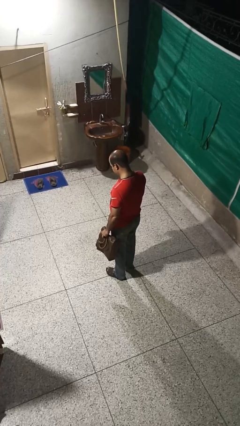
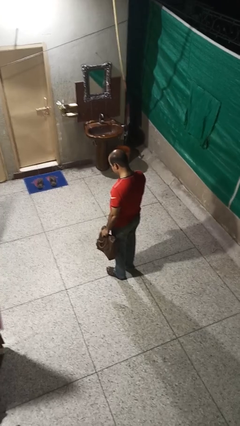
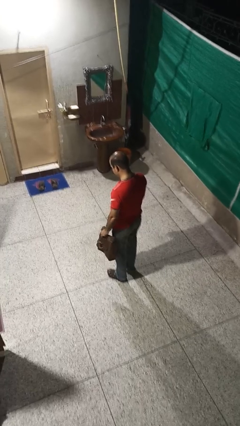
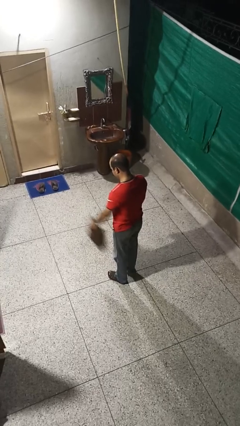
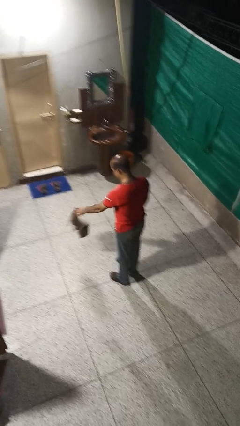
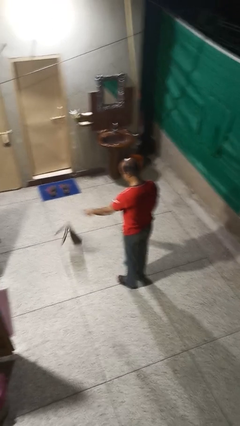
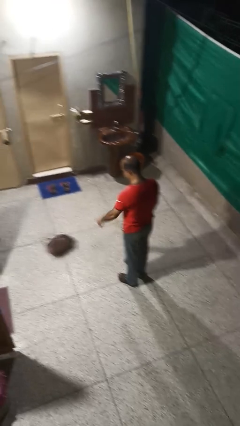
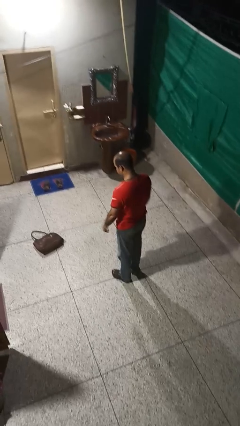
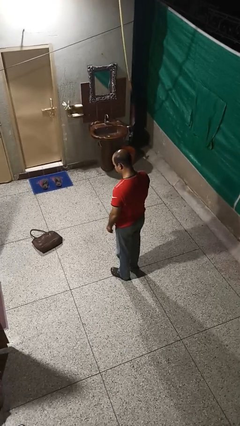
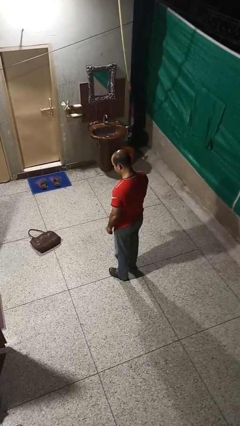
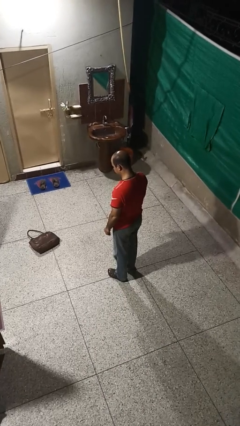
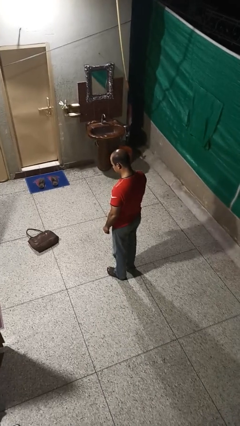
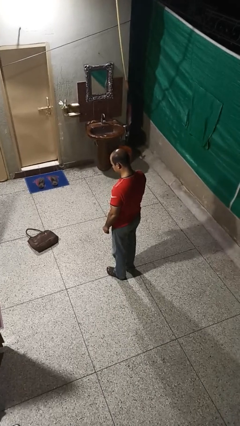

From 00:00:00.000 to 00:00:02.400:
person throws object to ground

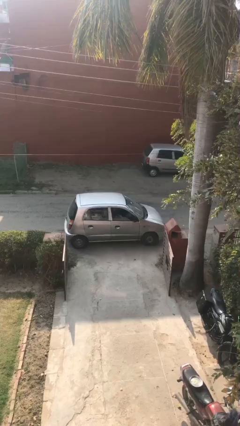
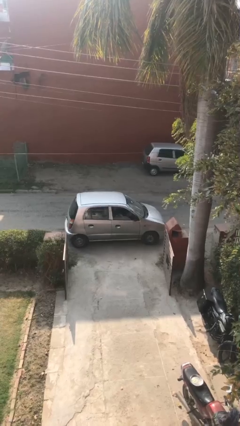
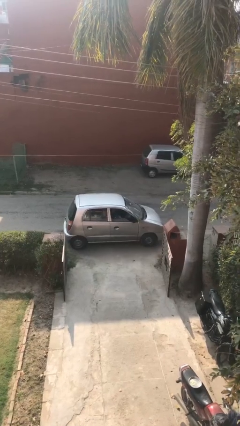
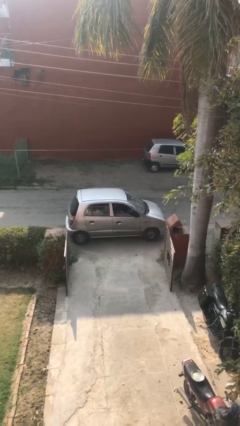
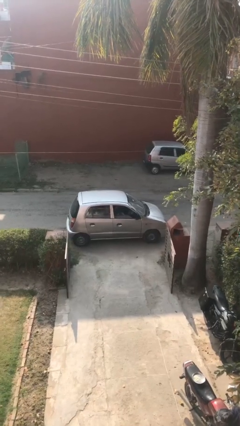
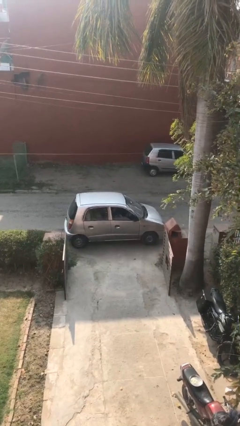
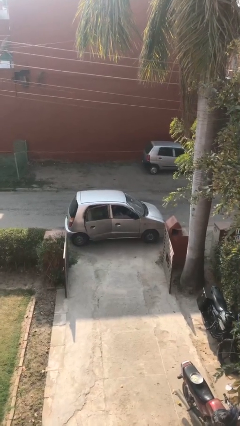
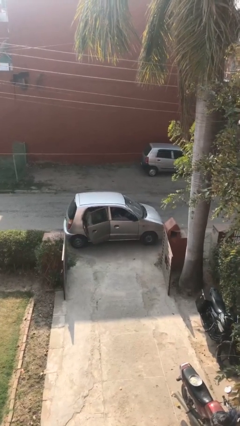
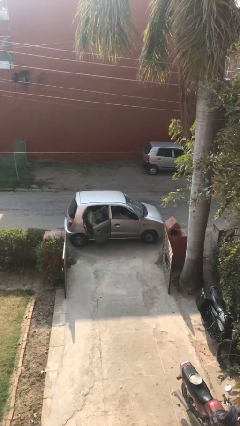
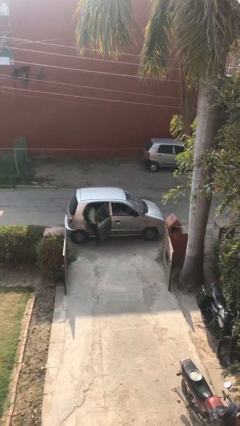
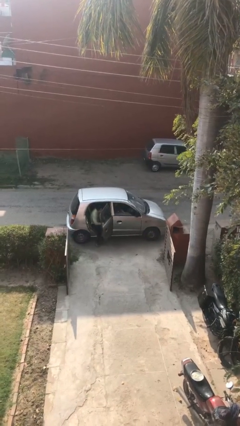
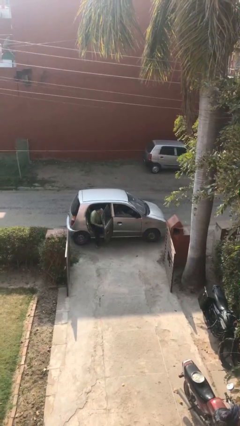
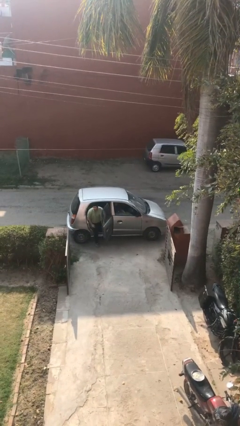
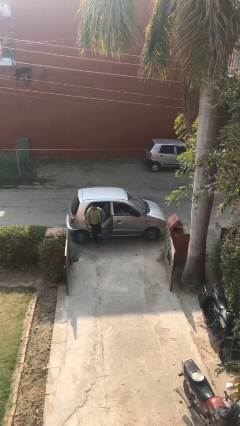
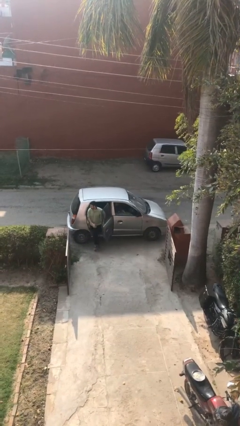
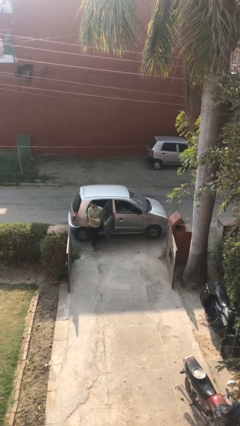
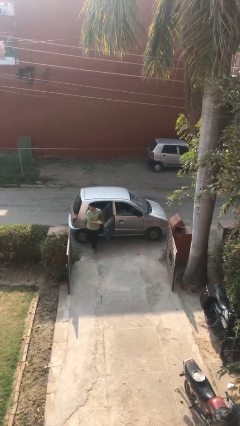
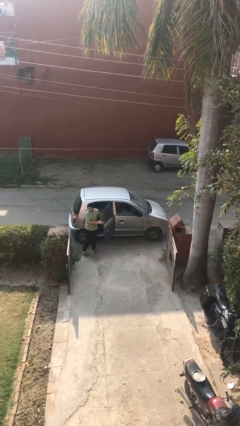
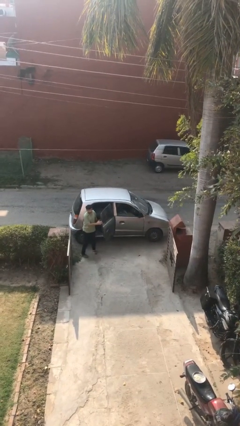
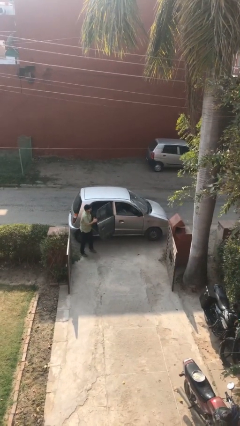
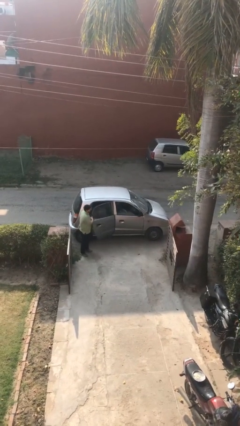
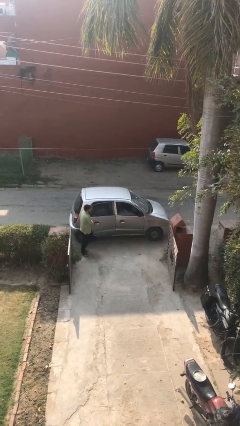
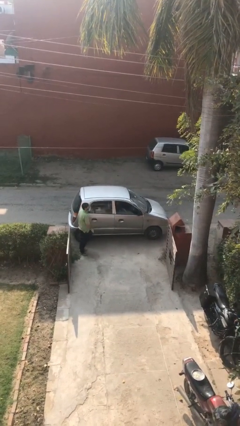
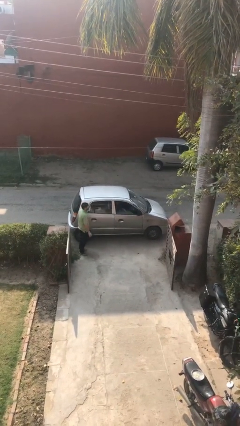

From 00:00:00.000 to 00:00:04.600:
car drops off person

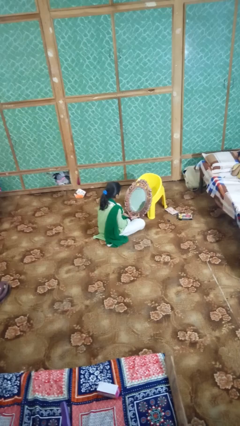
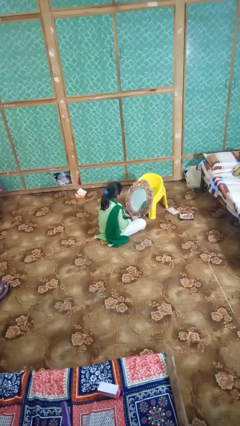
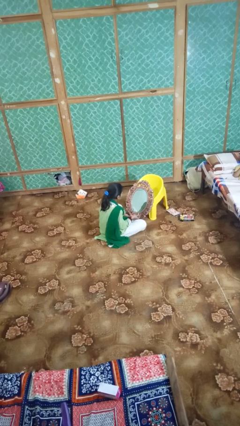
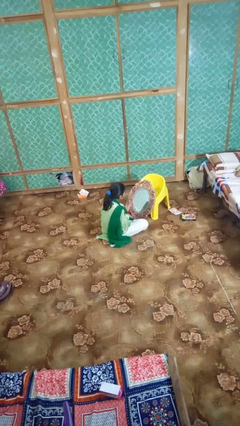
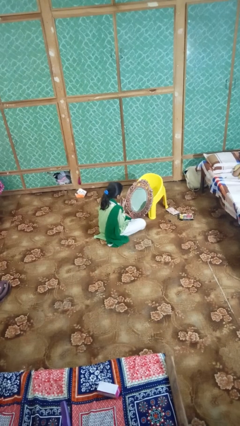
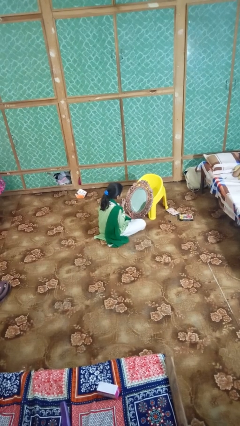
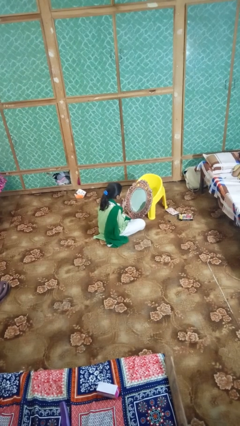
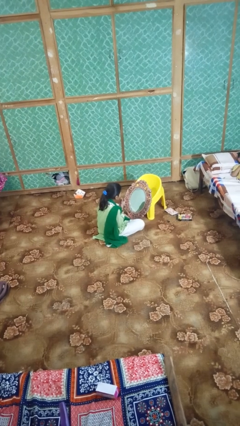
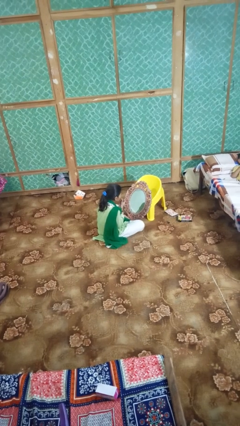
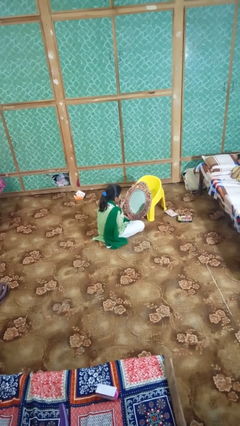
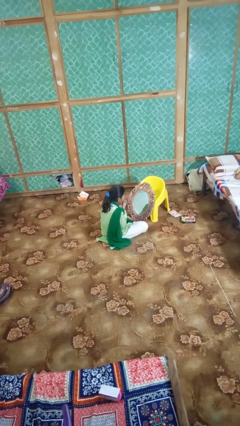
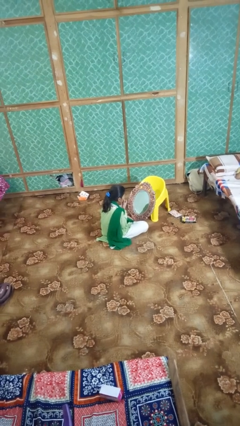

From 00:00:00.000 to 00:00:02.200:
person applies lip makeup

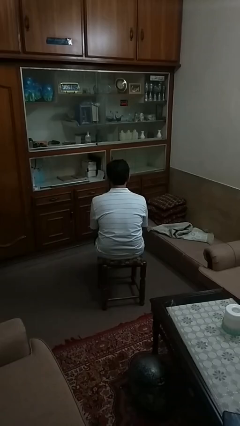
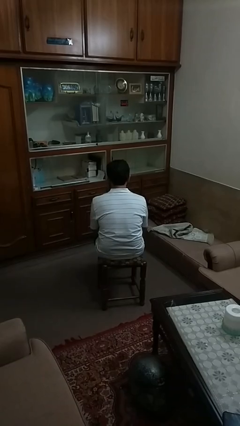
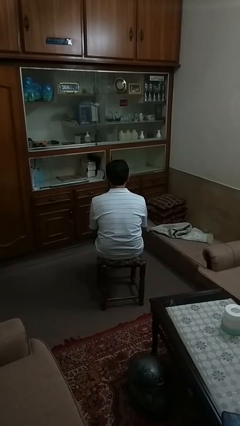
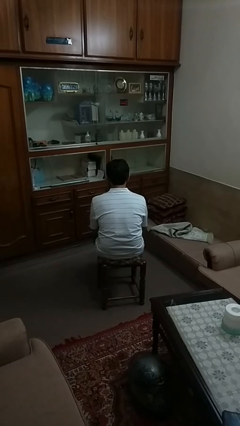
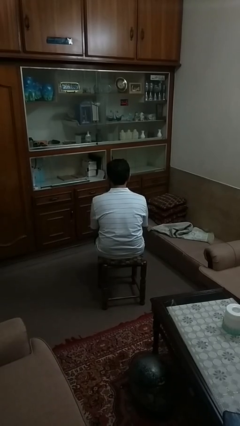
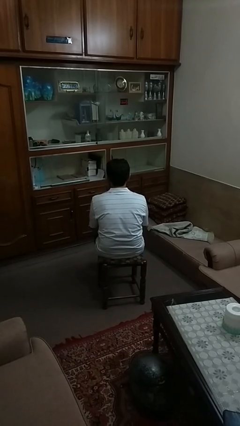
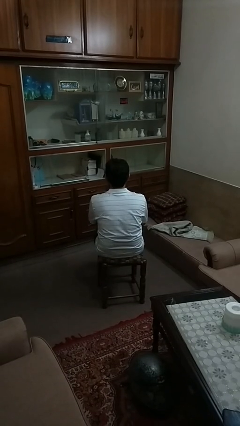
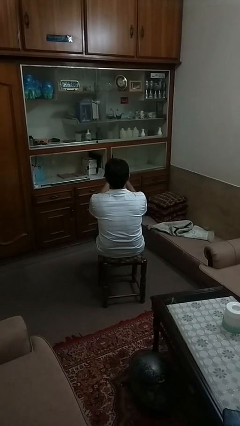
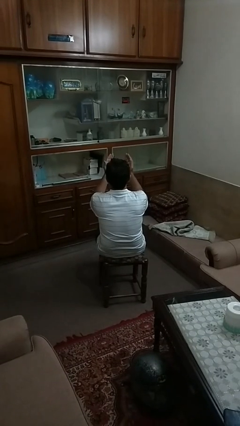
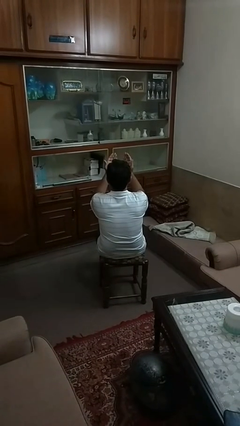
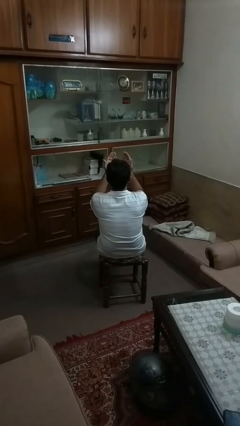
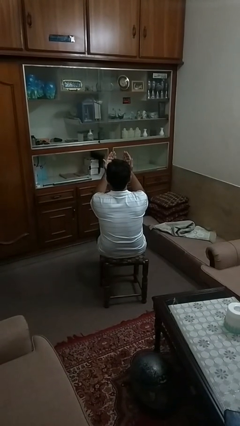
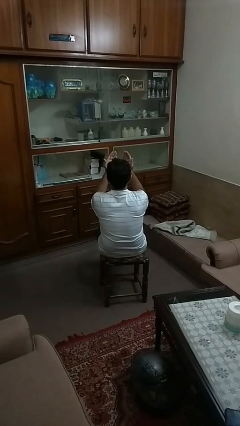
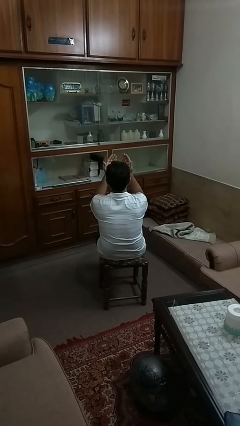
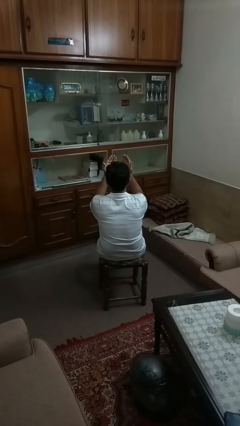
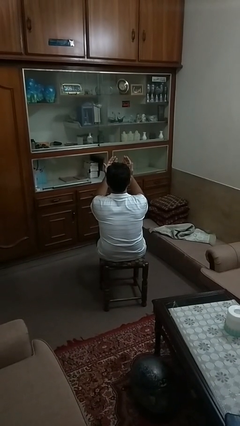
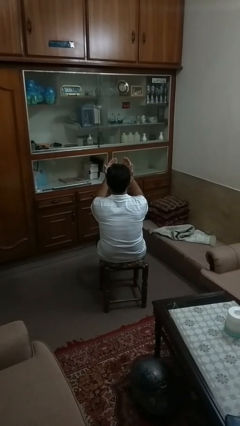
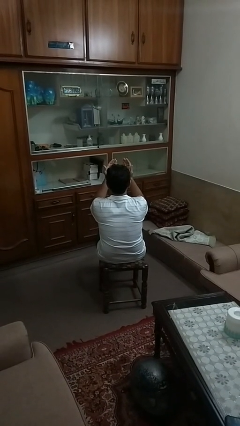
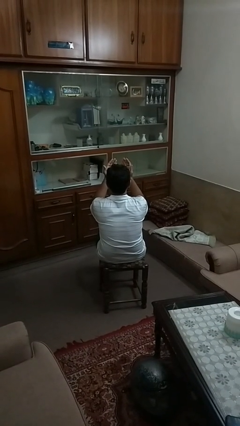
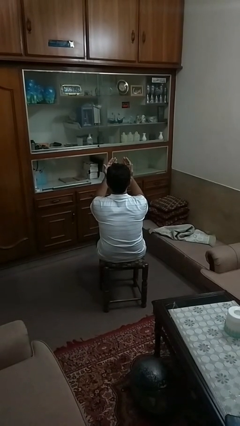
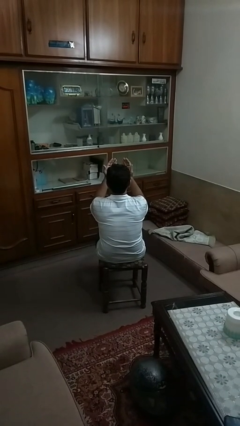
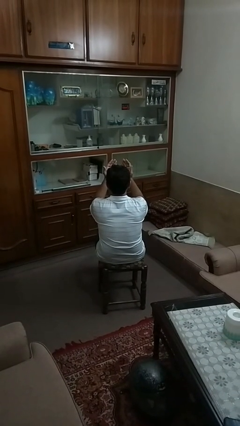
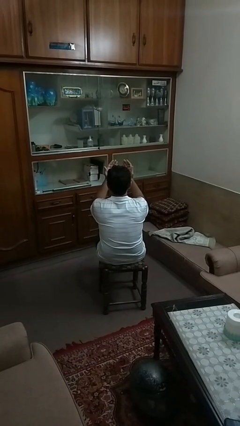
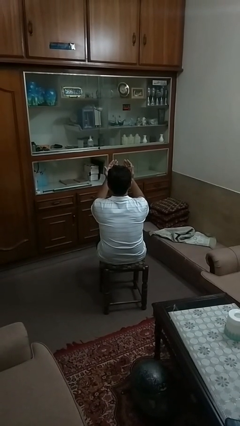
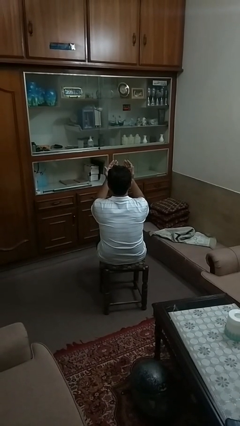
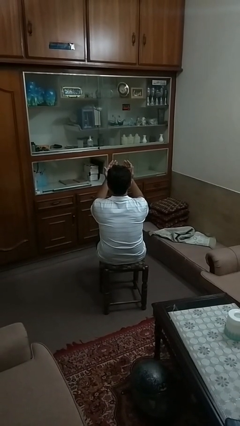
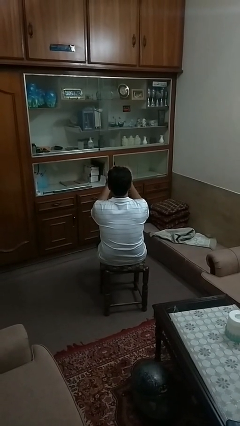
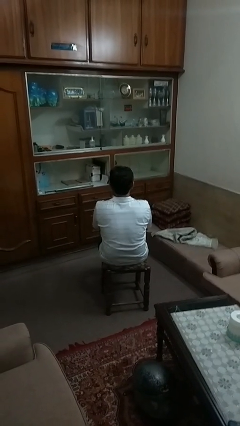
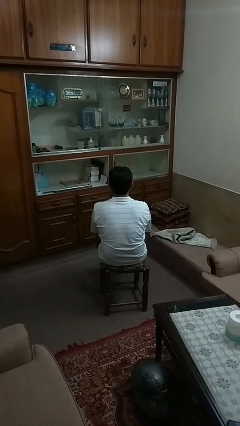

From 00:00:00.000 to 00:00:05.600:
person prays

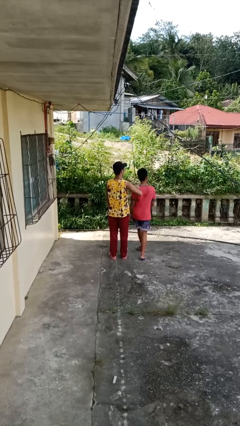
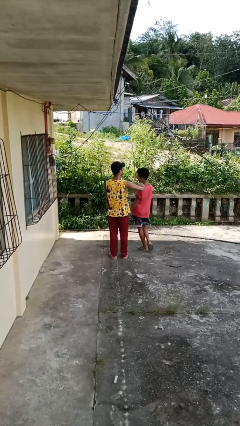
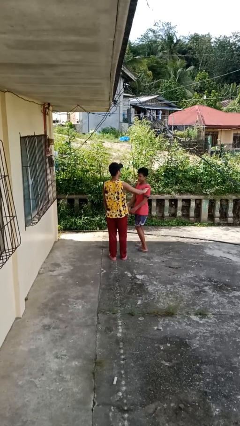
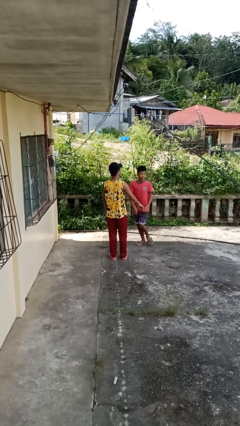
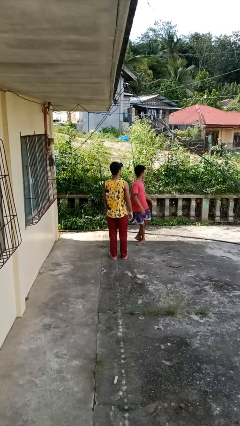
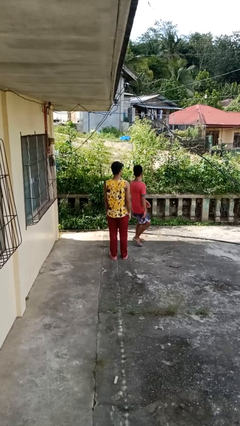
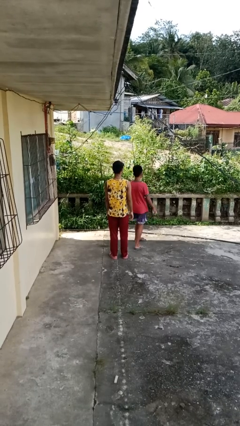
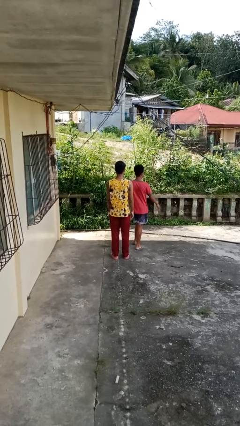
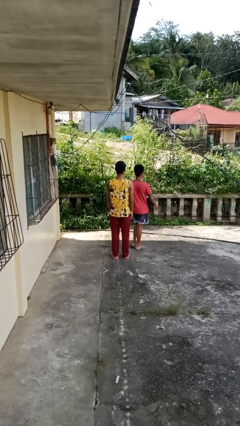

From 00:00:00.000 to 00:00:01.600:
person spins person around

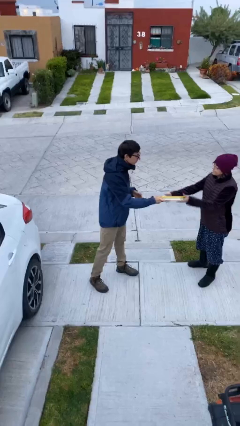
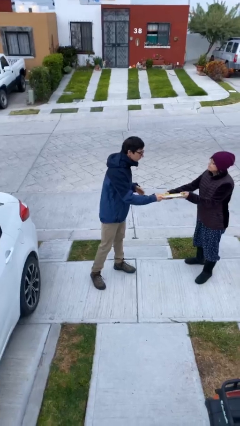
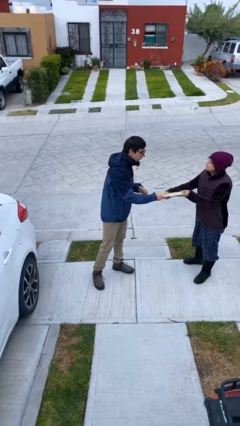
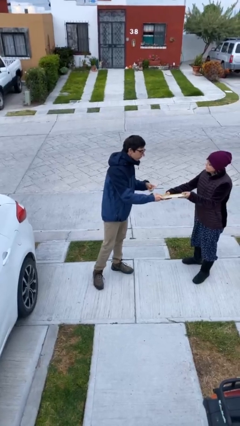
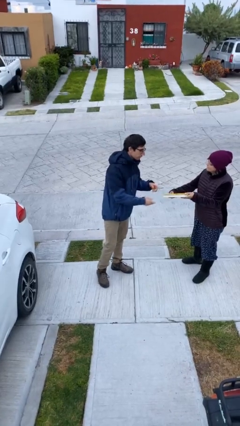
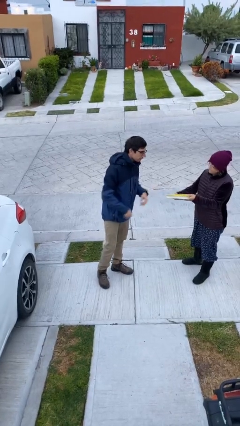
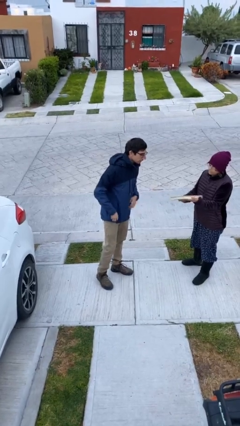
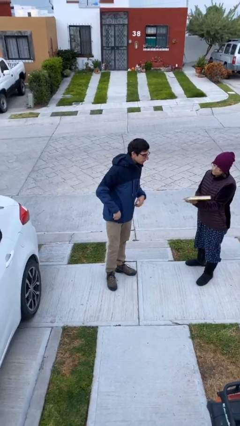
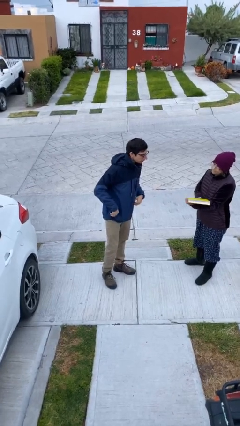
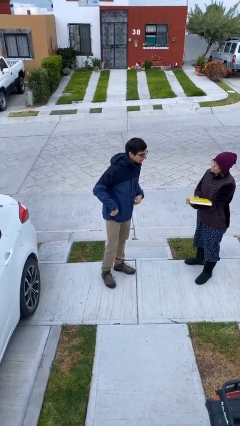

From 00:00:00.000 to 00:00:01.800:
person transfers object to person
